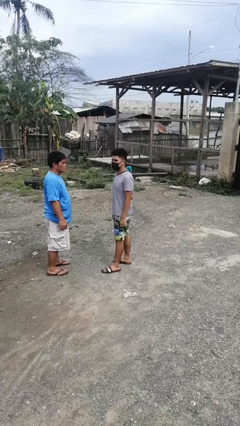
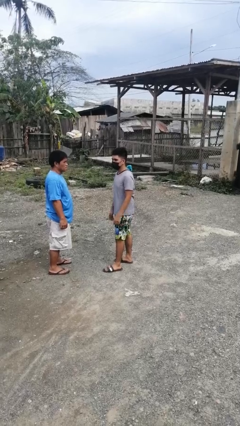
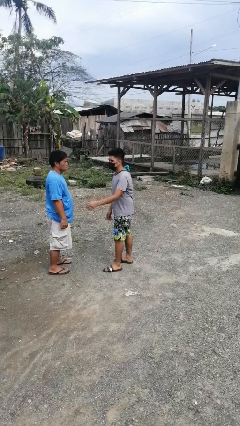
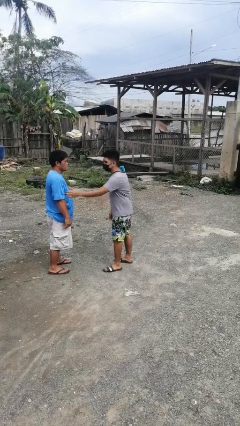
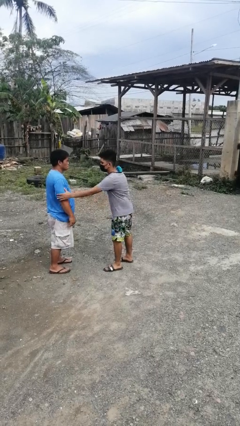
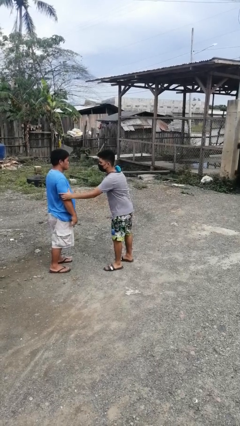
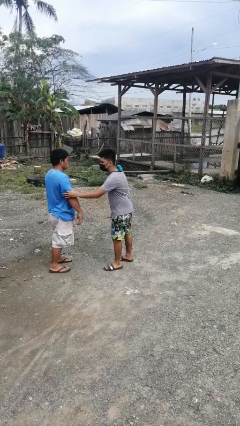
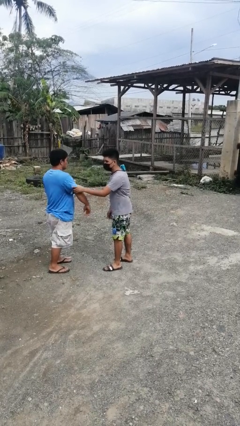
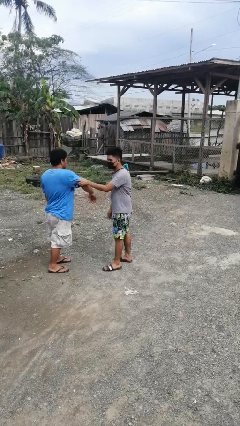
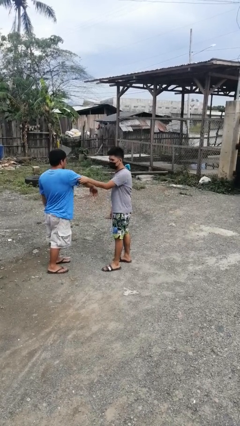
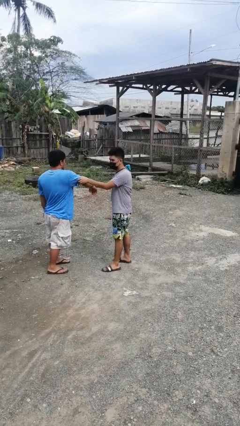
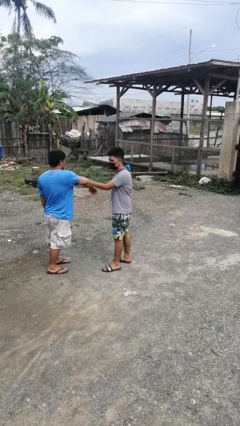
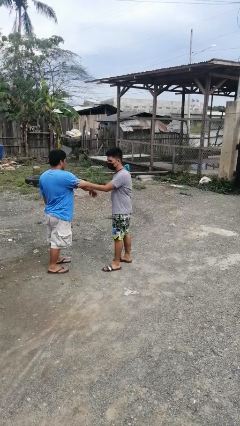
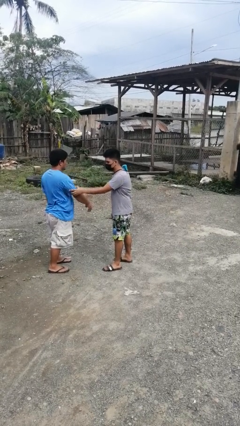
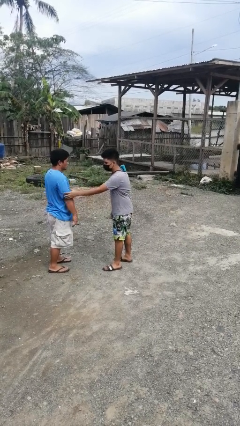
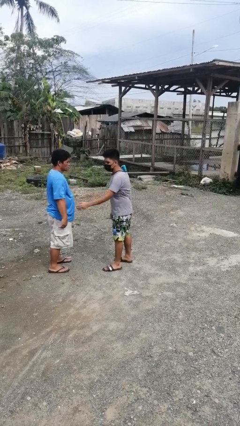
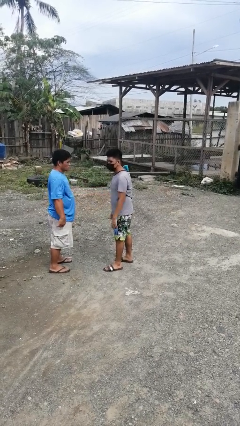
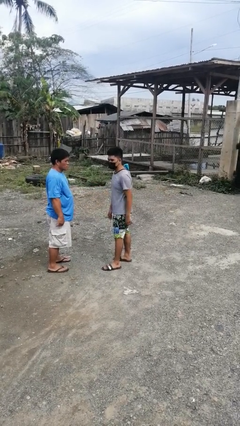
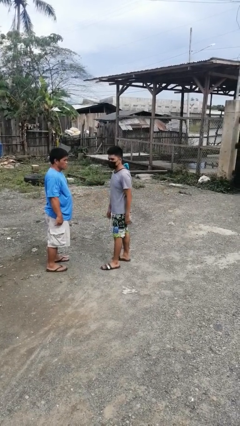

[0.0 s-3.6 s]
person grabs person by bicep

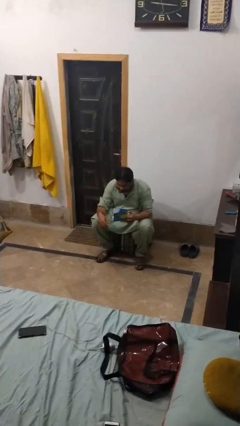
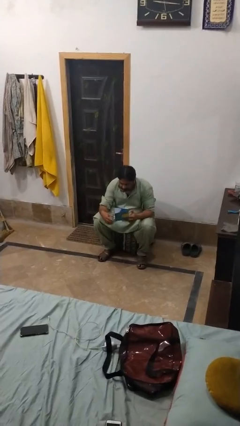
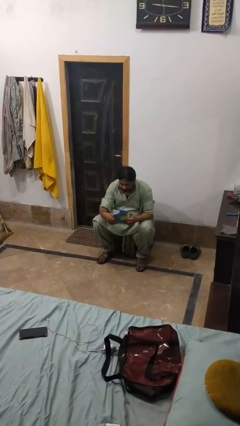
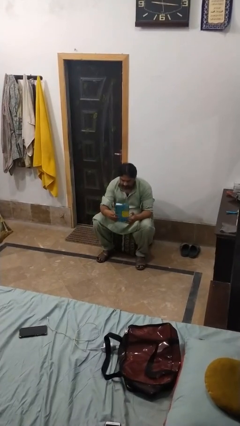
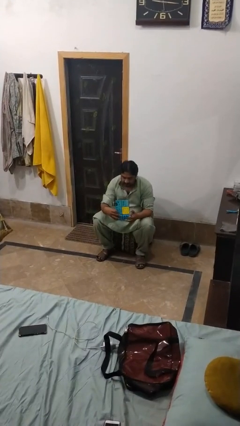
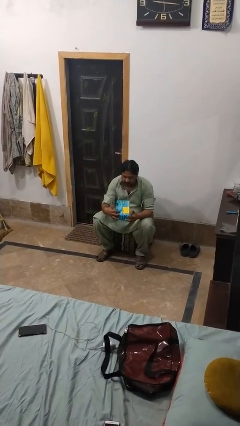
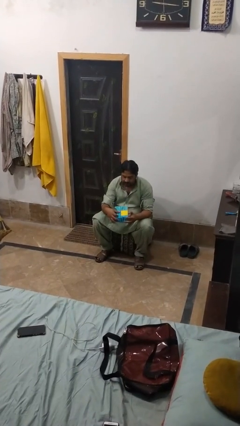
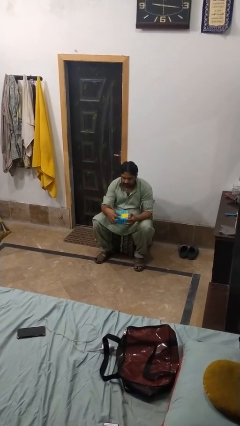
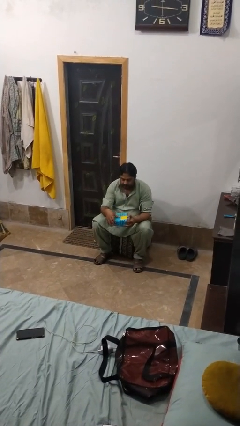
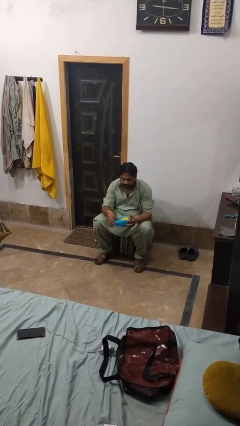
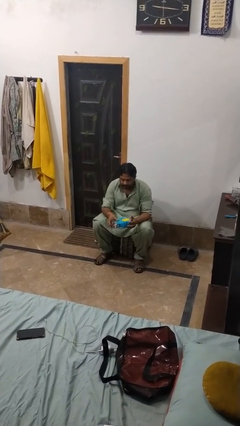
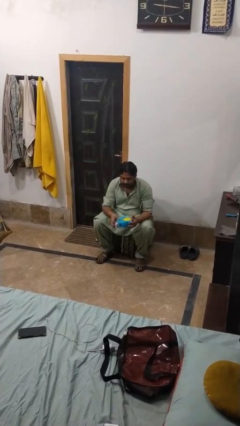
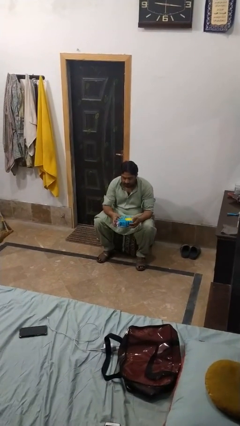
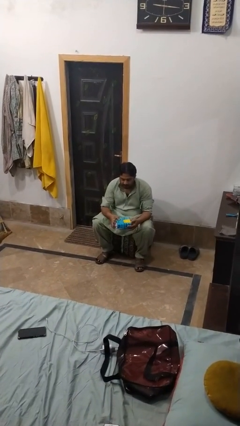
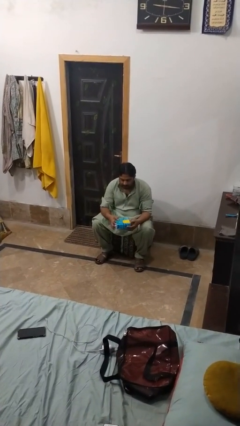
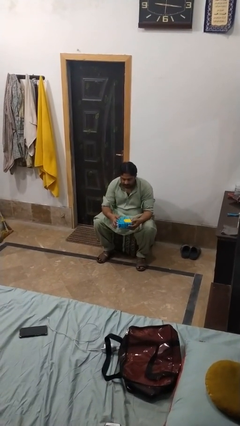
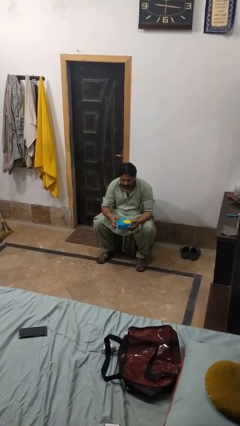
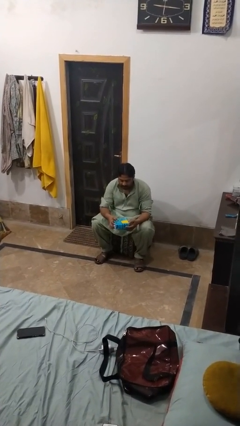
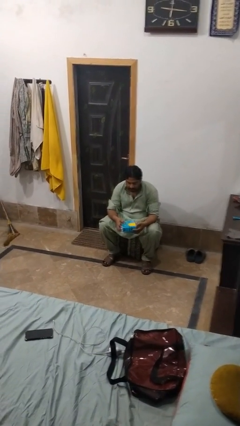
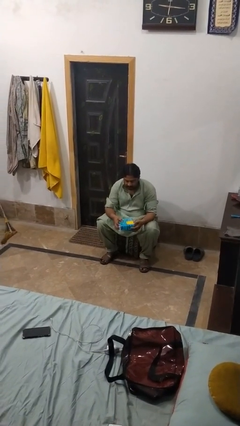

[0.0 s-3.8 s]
person closes jewelry box

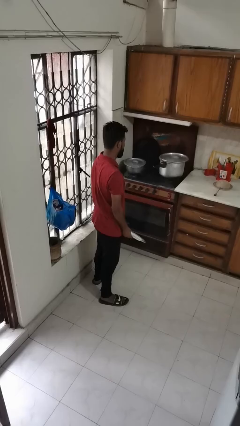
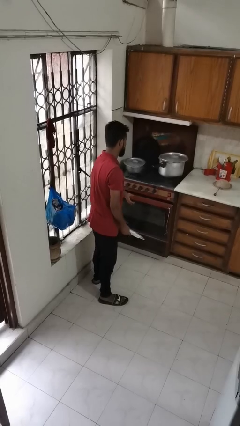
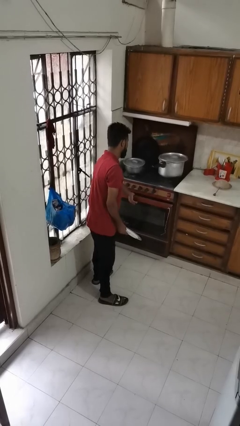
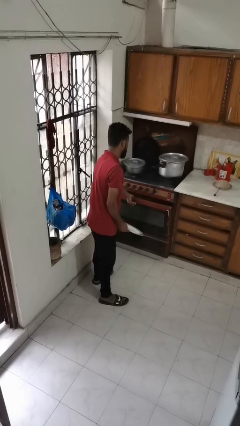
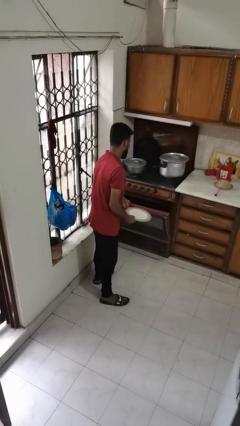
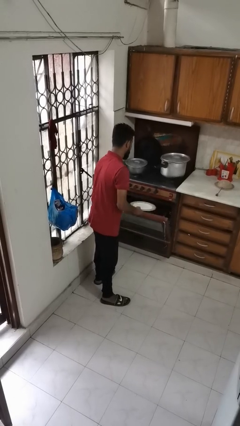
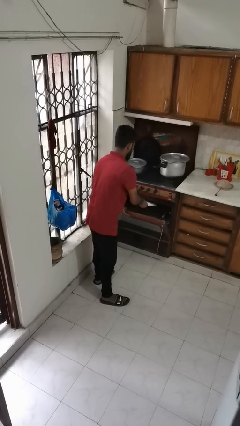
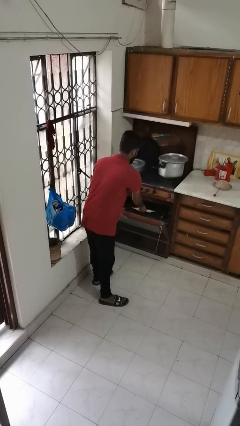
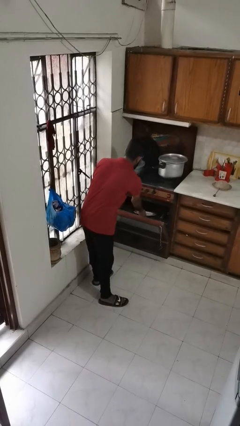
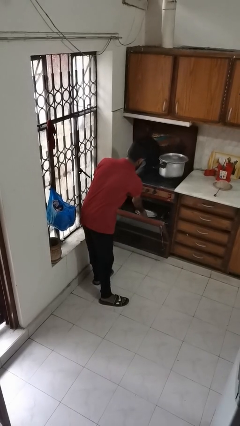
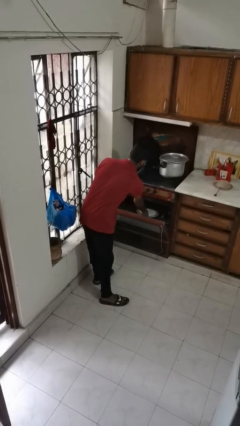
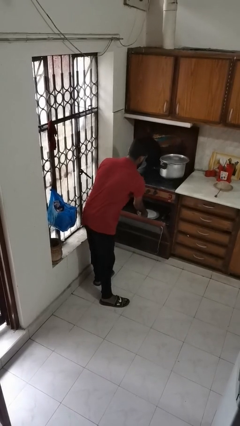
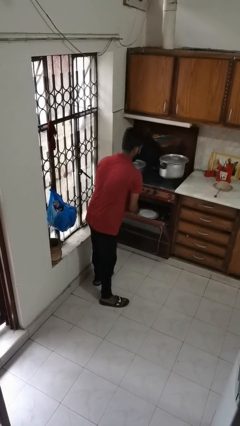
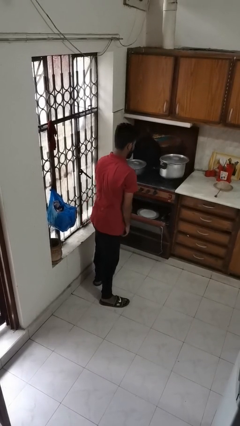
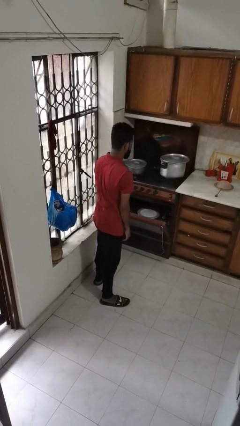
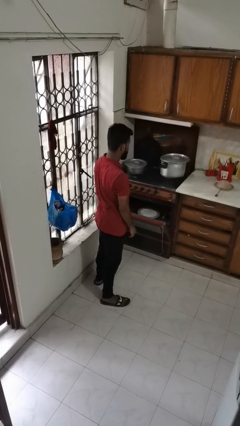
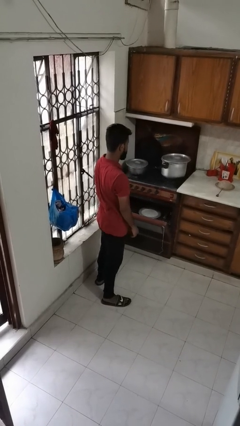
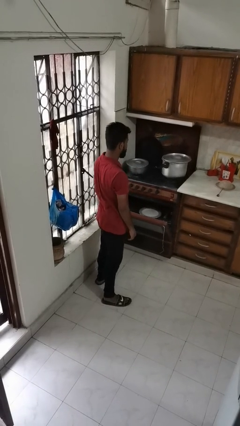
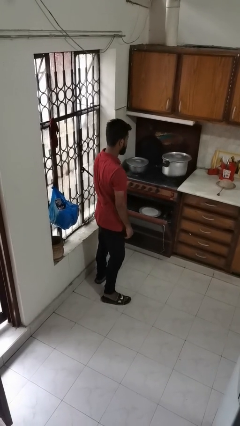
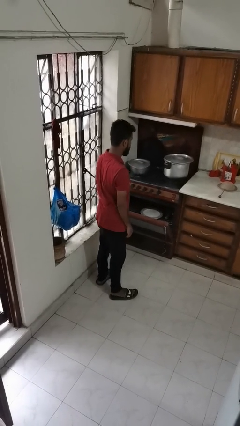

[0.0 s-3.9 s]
person puts object into oven

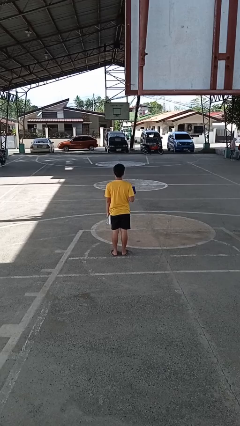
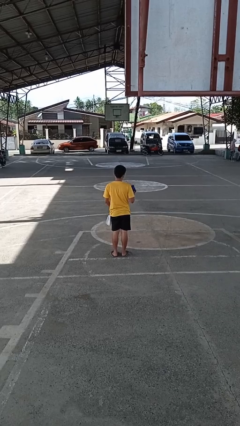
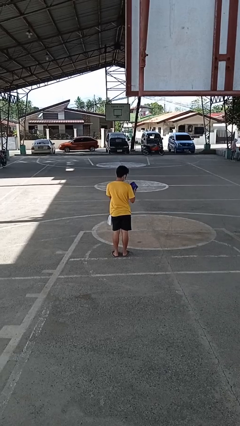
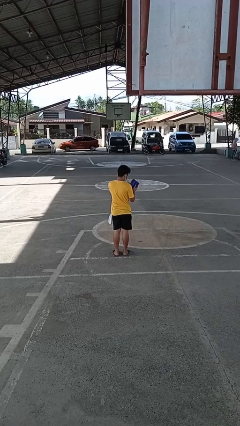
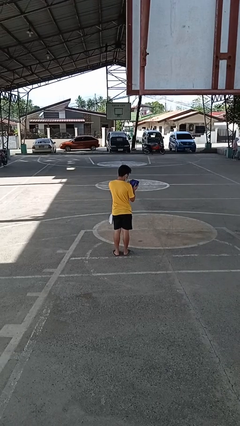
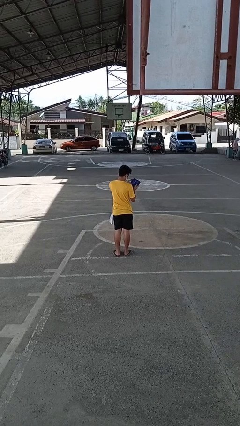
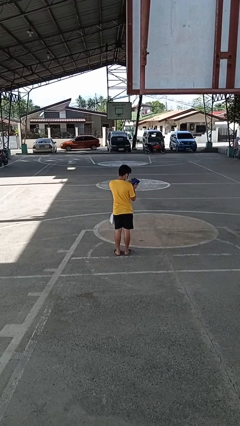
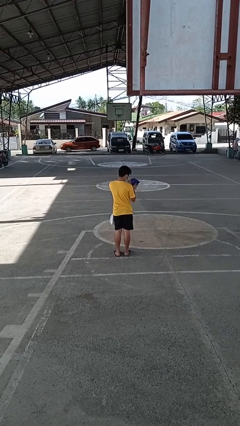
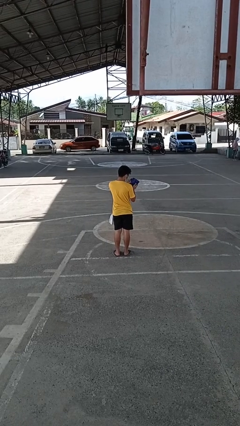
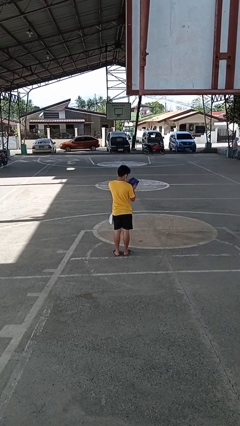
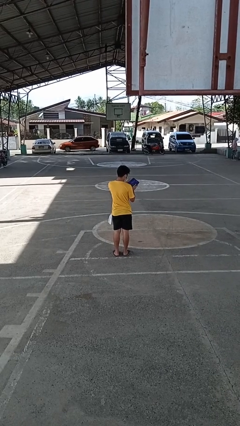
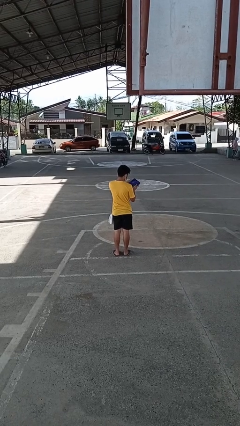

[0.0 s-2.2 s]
person searches in purse

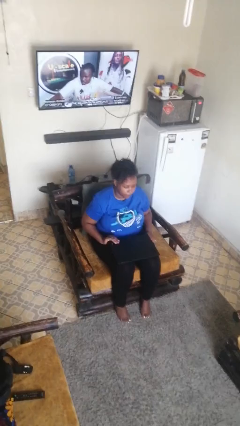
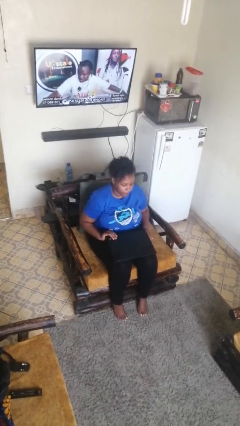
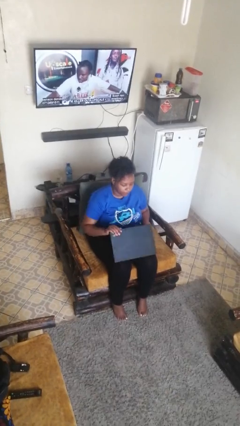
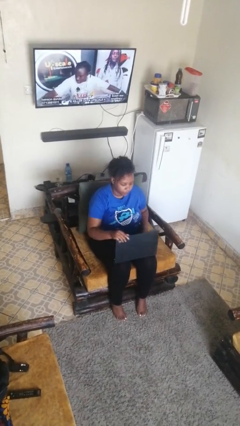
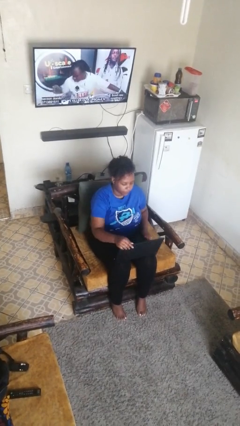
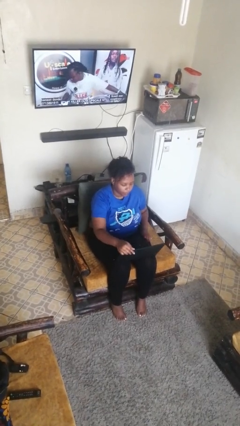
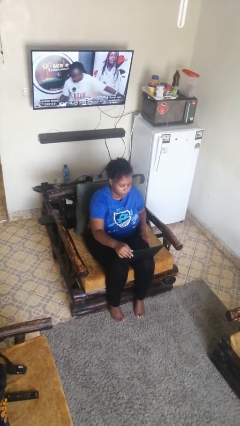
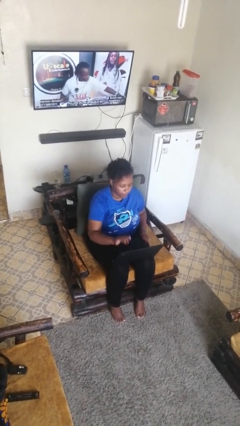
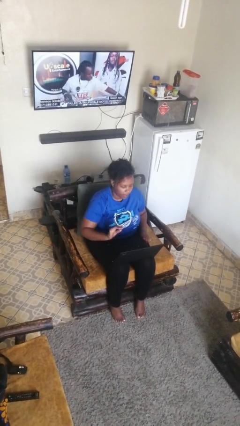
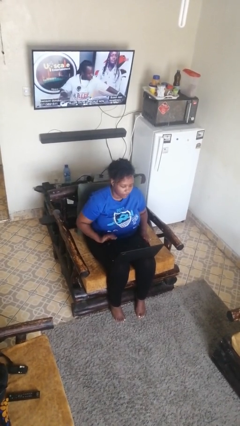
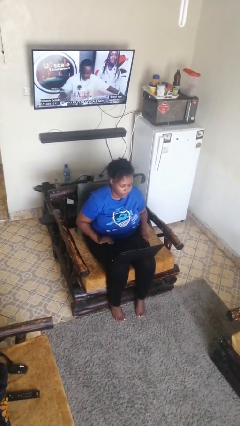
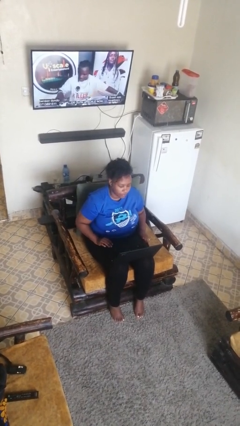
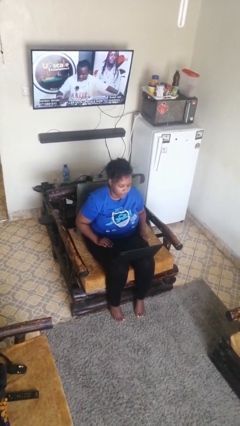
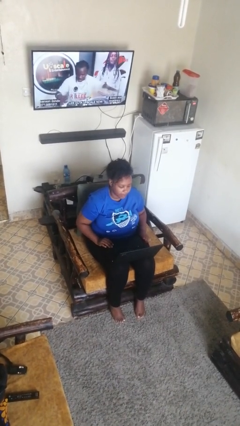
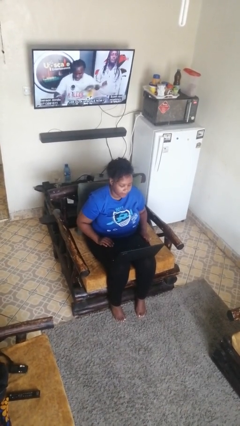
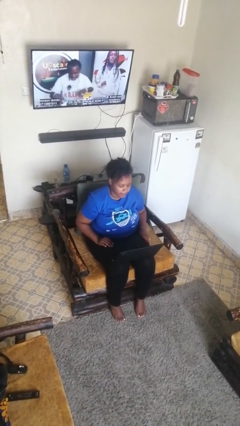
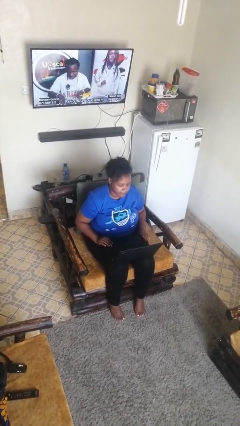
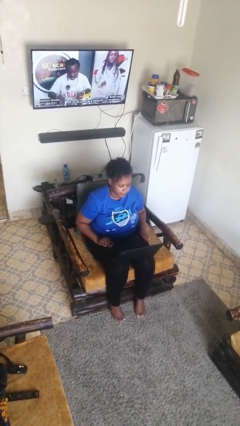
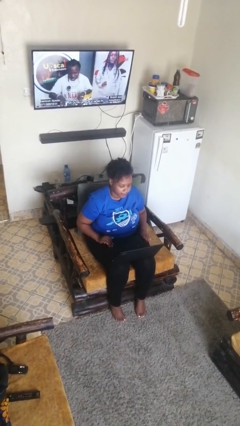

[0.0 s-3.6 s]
person opens laptop

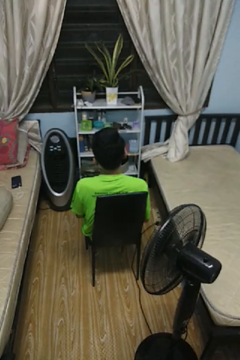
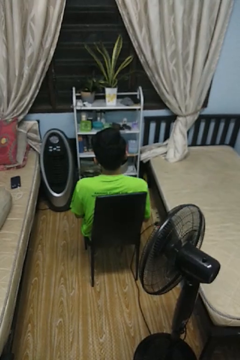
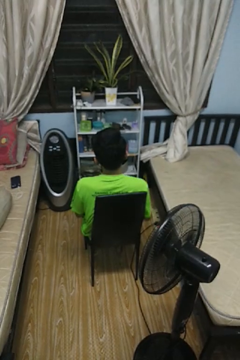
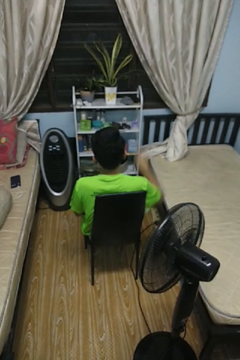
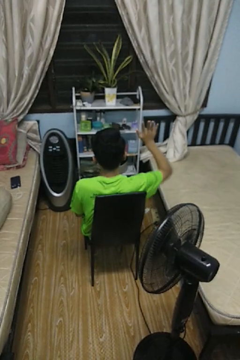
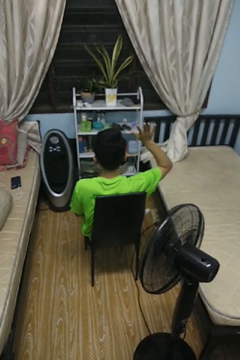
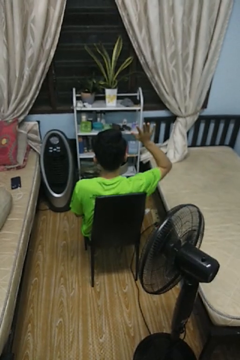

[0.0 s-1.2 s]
person gestures number five
